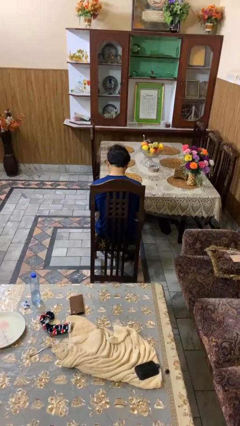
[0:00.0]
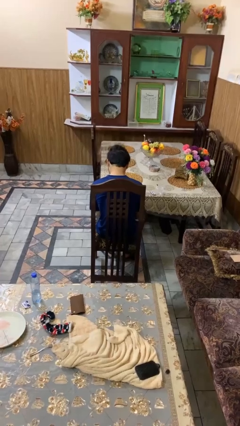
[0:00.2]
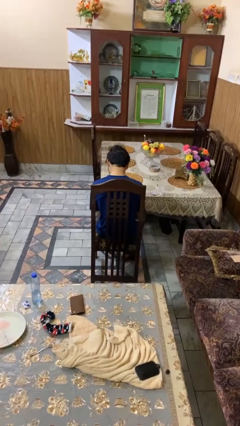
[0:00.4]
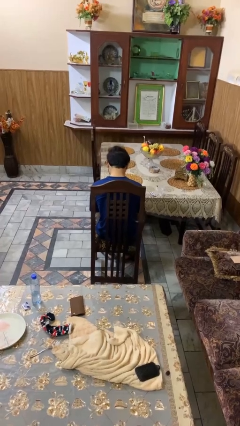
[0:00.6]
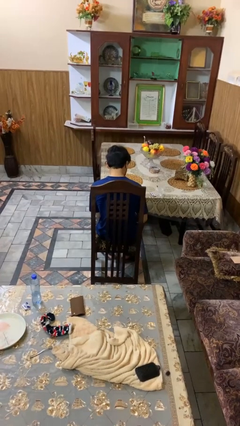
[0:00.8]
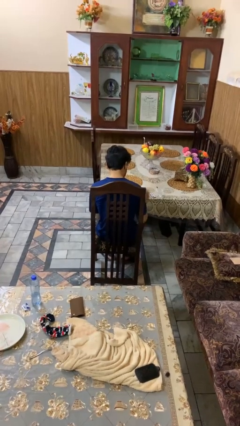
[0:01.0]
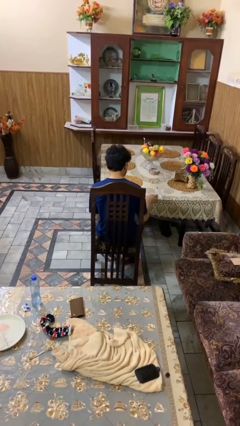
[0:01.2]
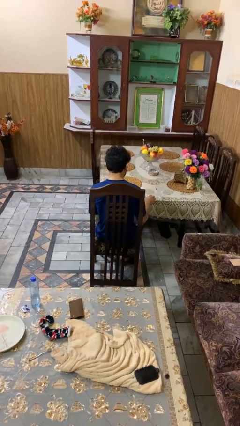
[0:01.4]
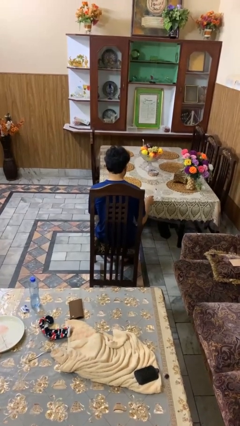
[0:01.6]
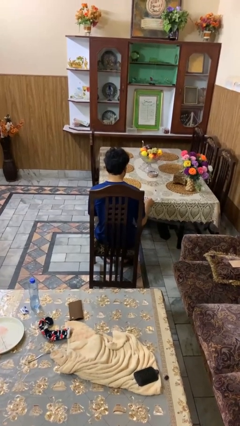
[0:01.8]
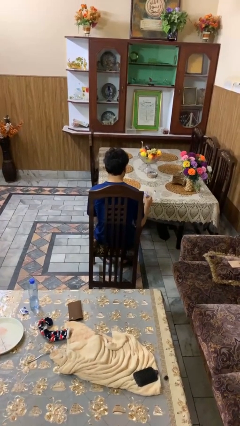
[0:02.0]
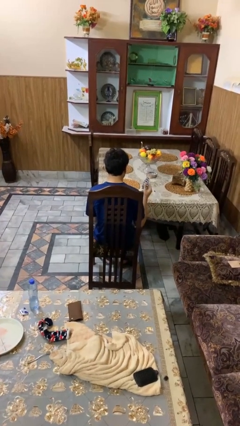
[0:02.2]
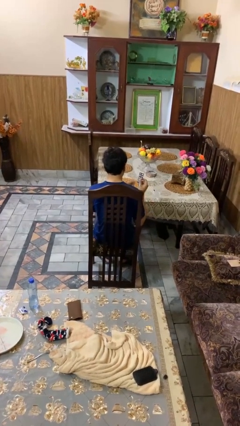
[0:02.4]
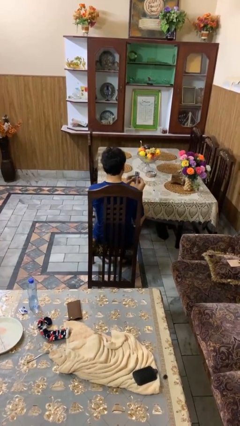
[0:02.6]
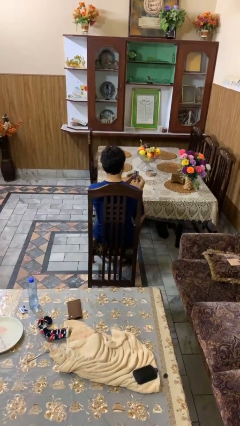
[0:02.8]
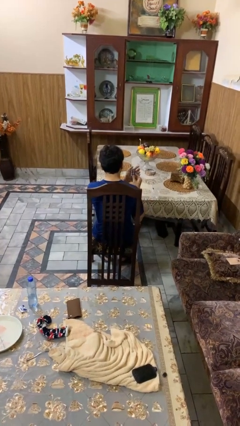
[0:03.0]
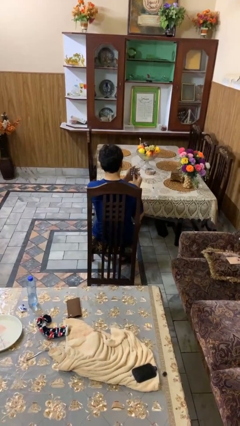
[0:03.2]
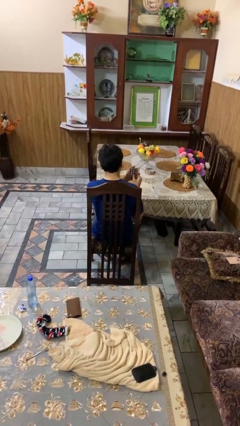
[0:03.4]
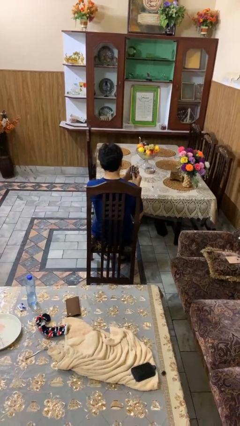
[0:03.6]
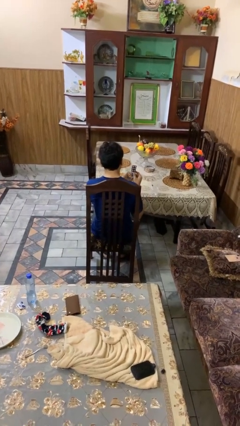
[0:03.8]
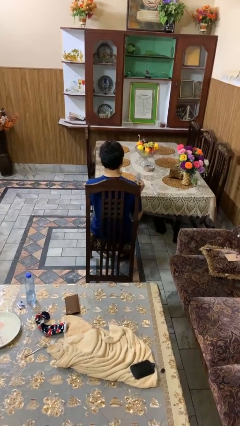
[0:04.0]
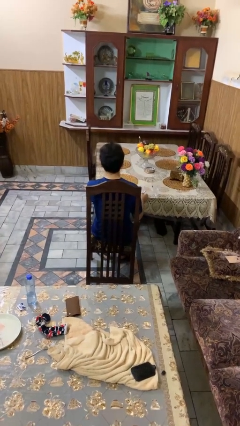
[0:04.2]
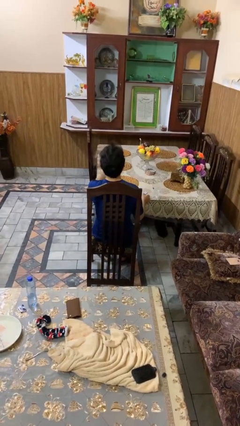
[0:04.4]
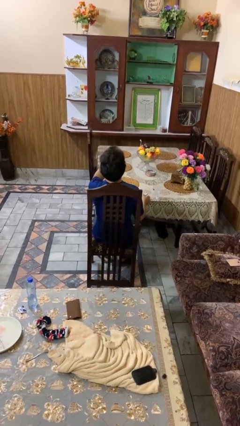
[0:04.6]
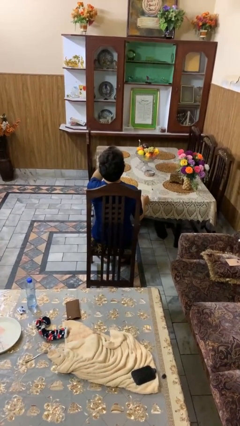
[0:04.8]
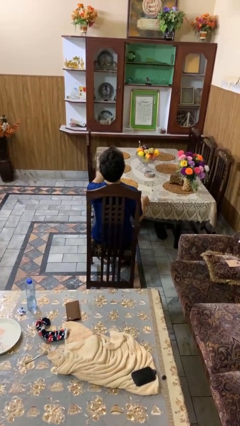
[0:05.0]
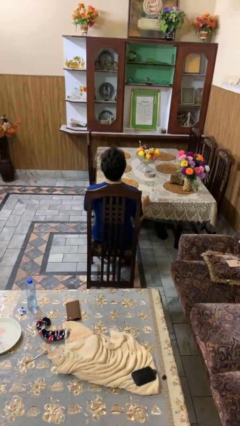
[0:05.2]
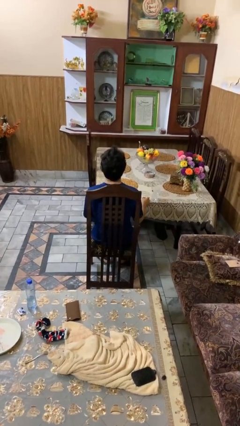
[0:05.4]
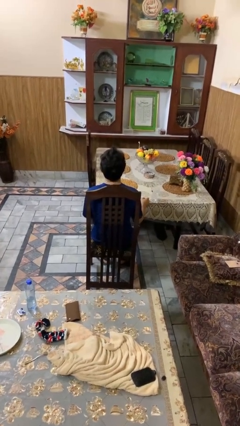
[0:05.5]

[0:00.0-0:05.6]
person takes medicine pills

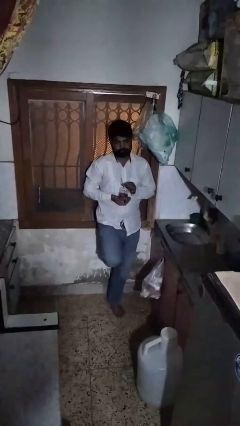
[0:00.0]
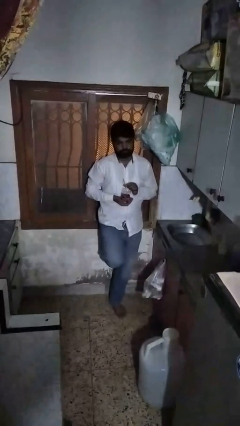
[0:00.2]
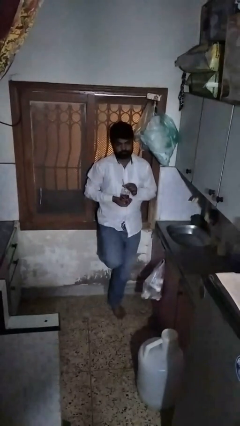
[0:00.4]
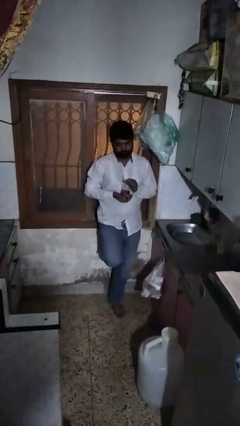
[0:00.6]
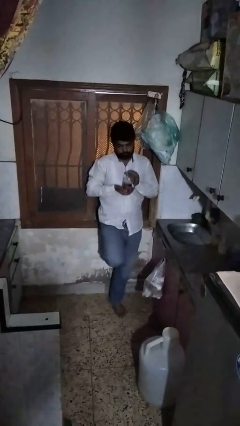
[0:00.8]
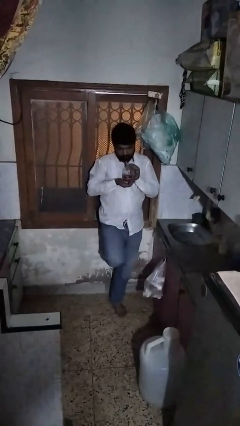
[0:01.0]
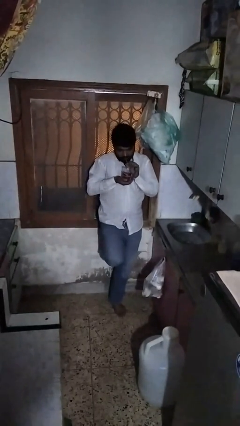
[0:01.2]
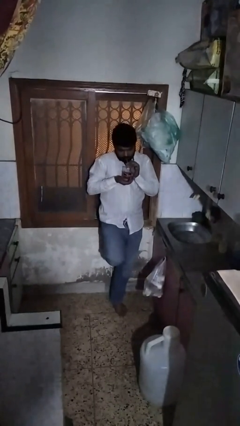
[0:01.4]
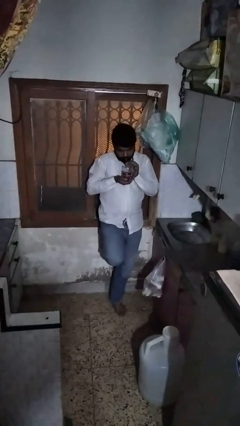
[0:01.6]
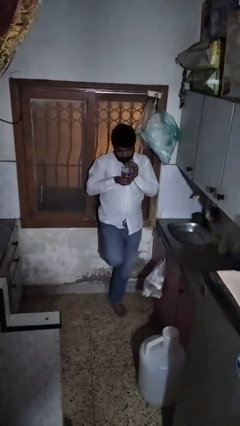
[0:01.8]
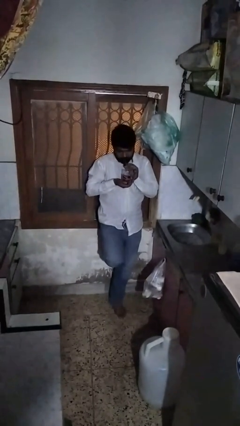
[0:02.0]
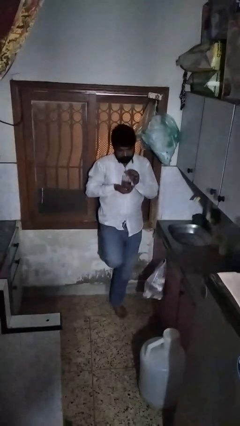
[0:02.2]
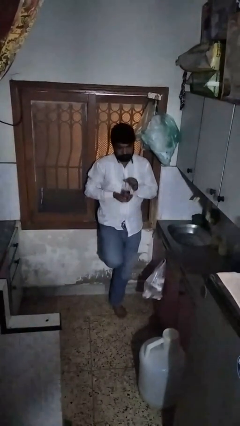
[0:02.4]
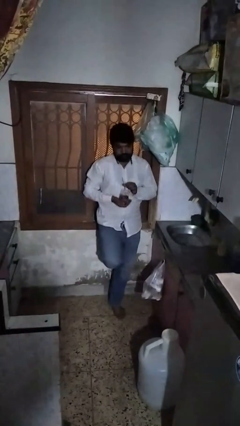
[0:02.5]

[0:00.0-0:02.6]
person drinks from straw

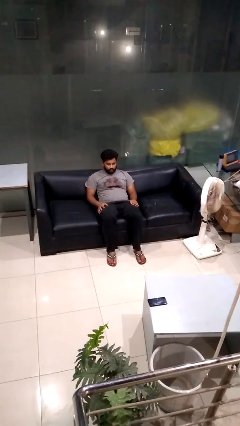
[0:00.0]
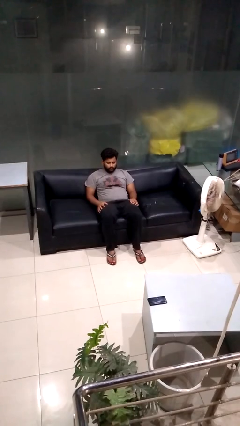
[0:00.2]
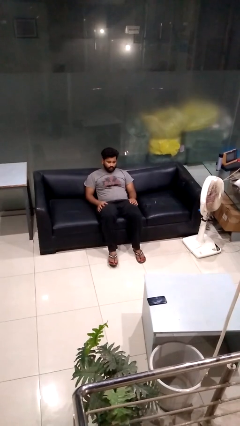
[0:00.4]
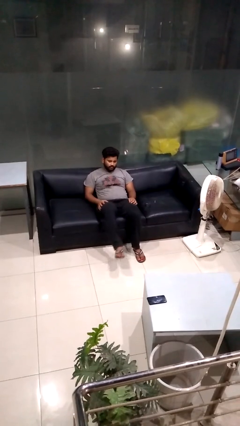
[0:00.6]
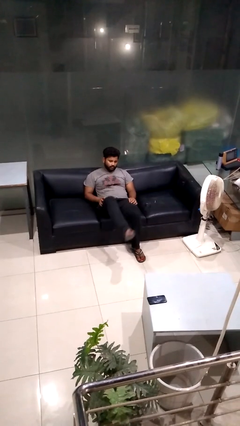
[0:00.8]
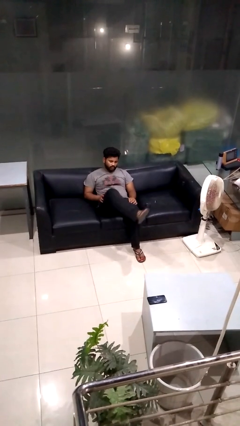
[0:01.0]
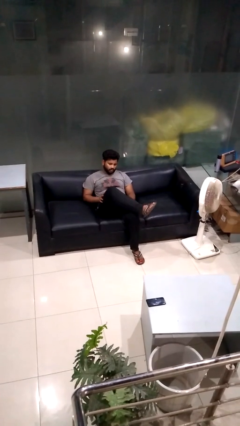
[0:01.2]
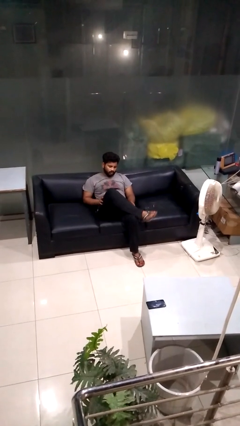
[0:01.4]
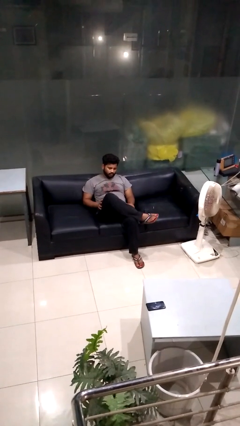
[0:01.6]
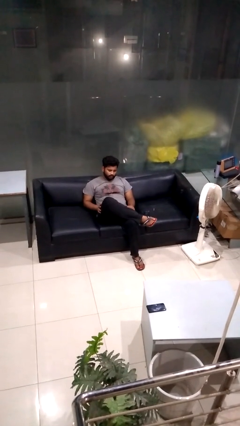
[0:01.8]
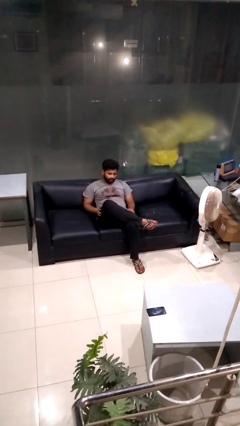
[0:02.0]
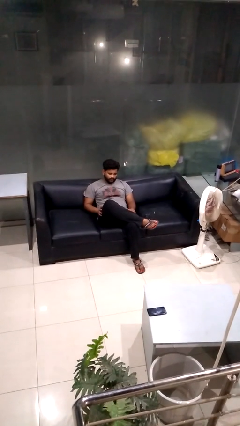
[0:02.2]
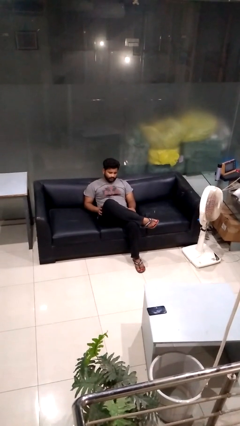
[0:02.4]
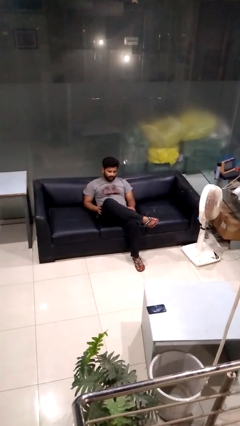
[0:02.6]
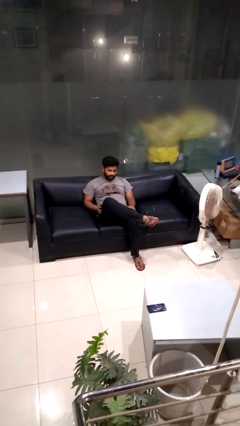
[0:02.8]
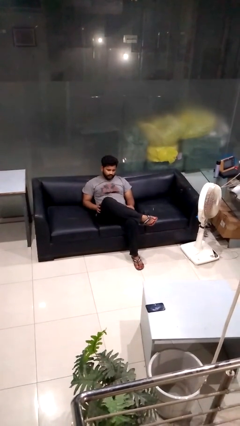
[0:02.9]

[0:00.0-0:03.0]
person crosses legs

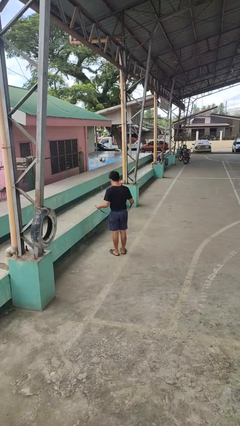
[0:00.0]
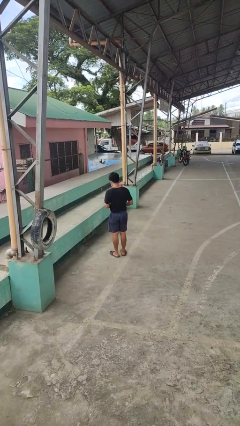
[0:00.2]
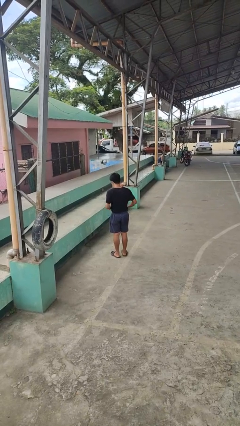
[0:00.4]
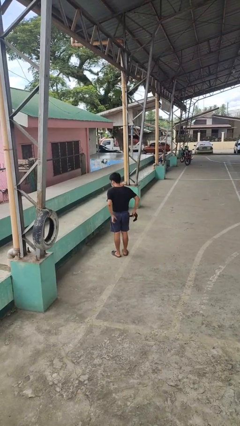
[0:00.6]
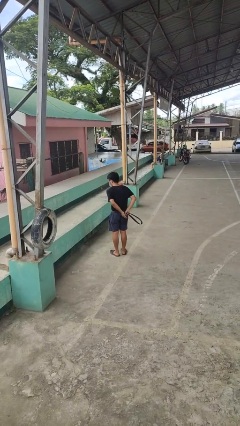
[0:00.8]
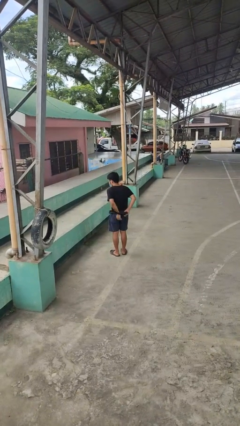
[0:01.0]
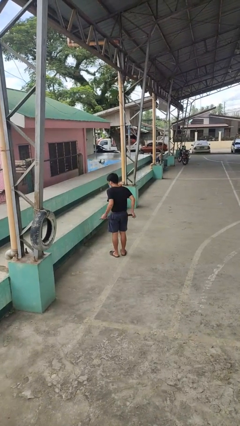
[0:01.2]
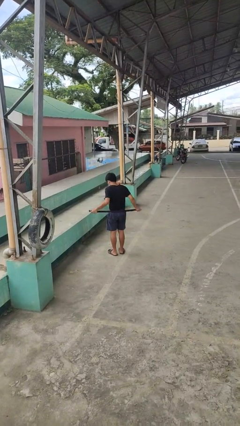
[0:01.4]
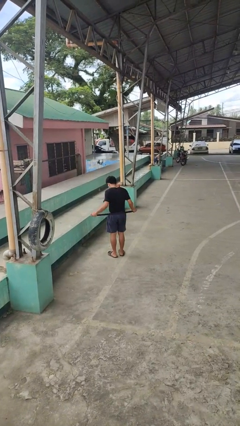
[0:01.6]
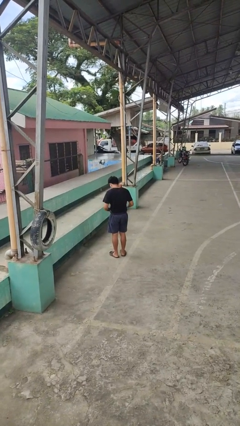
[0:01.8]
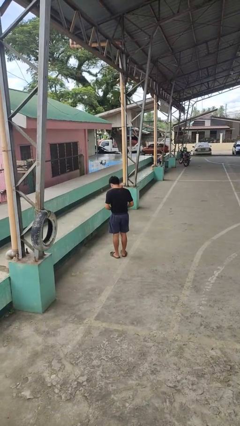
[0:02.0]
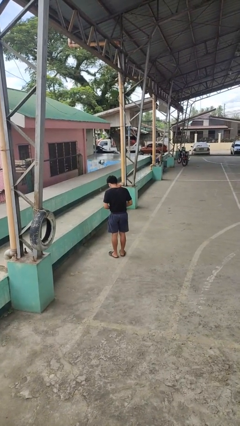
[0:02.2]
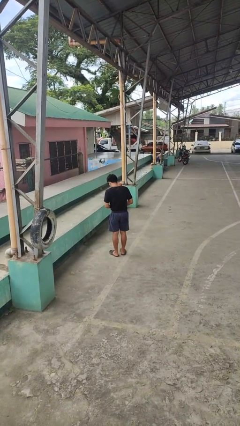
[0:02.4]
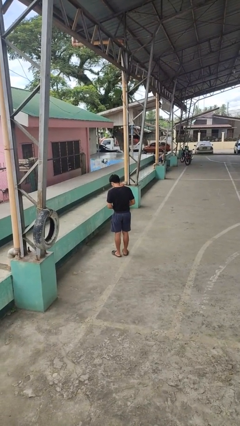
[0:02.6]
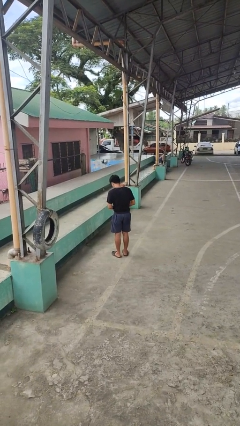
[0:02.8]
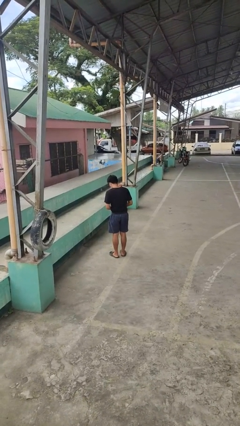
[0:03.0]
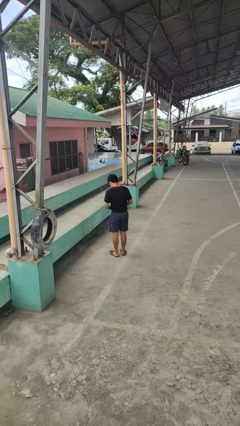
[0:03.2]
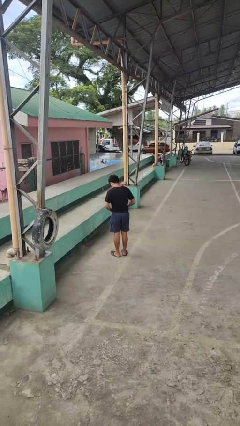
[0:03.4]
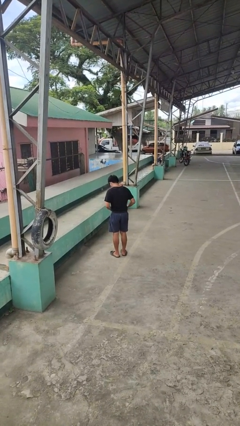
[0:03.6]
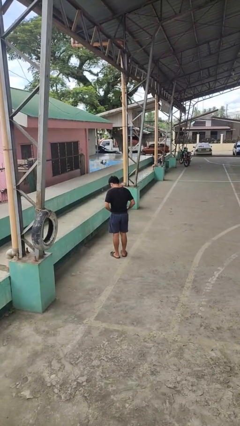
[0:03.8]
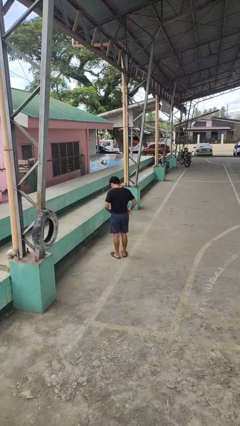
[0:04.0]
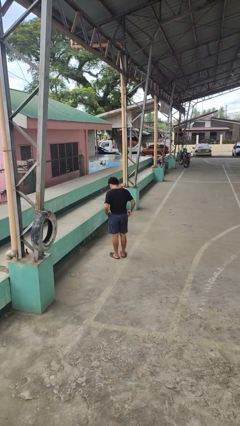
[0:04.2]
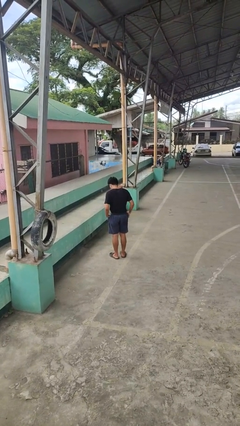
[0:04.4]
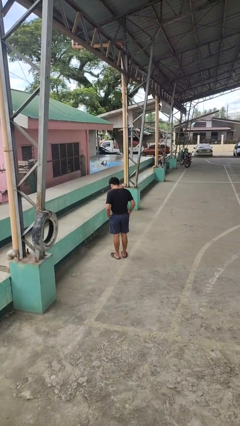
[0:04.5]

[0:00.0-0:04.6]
person puts on belt

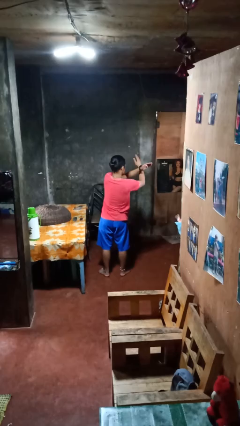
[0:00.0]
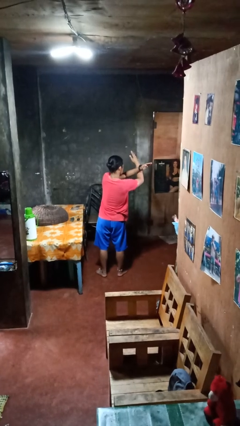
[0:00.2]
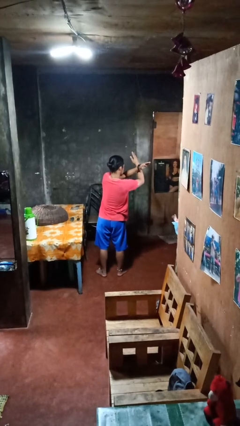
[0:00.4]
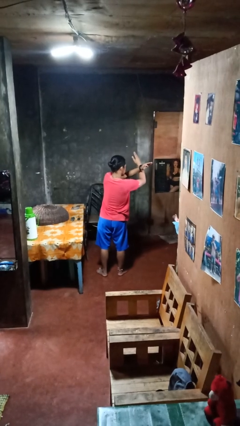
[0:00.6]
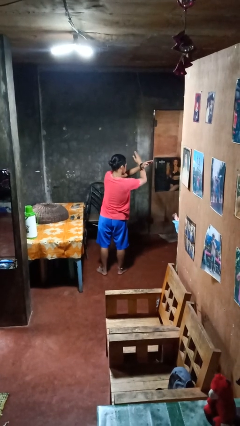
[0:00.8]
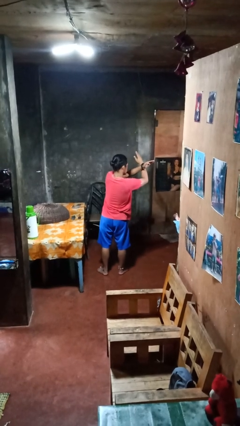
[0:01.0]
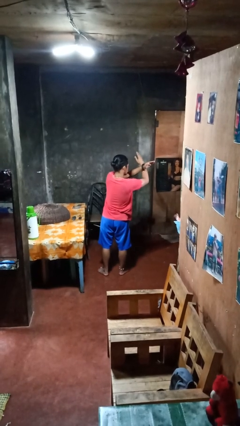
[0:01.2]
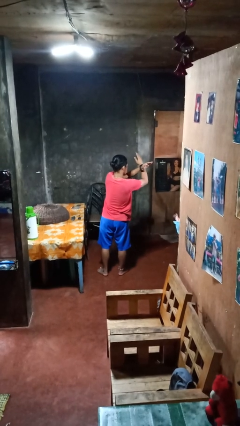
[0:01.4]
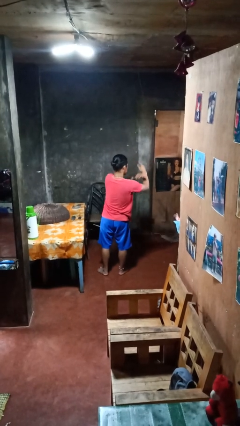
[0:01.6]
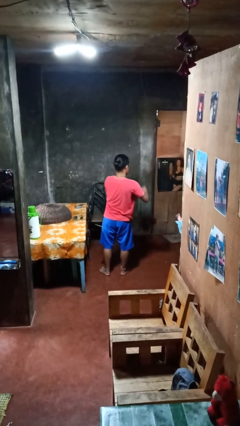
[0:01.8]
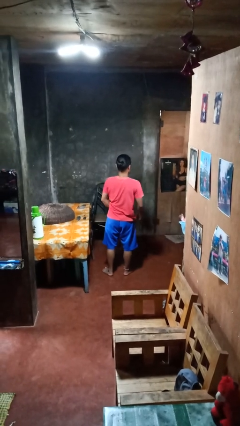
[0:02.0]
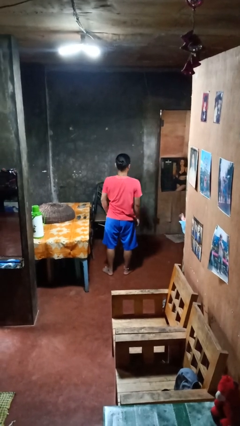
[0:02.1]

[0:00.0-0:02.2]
person gestures arms x
